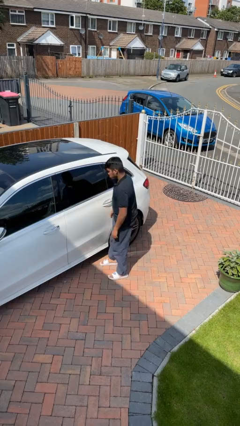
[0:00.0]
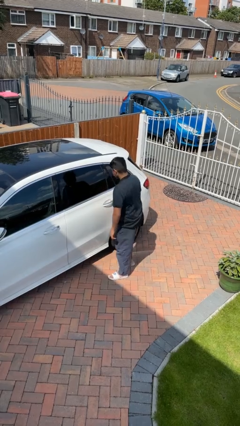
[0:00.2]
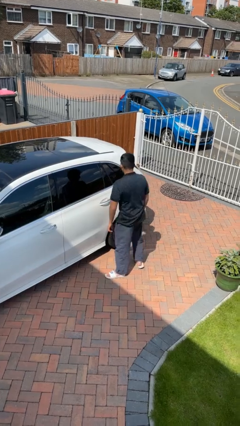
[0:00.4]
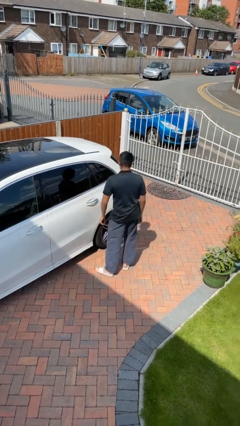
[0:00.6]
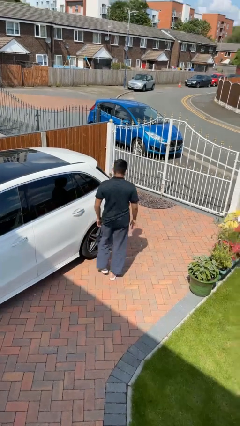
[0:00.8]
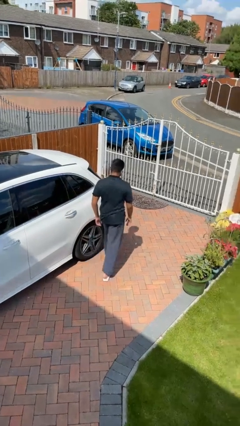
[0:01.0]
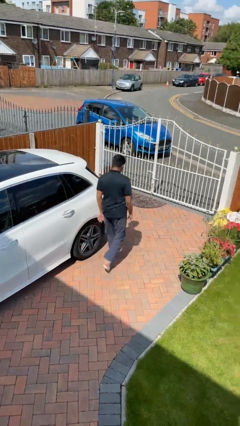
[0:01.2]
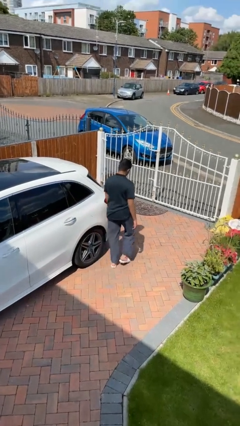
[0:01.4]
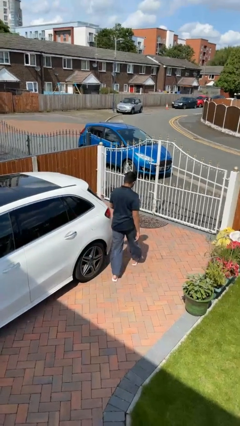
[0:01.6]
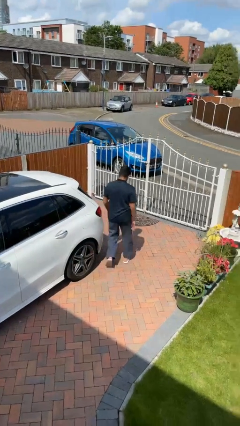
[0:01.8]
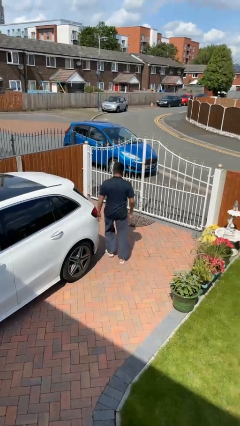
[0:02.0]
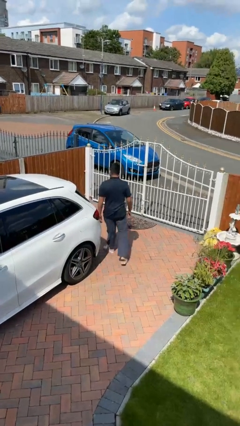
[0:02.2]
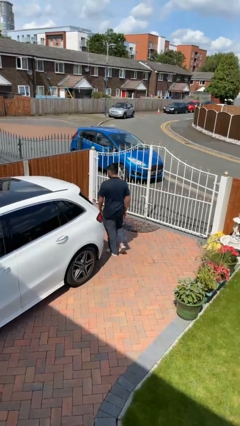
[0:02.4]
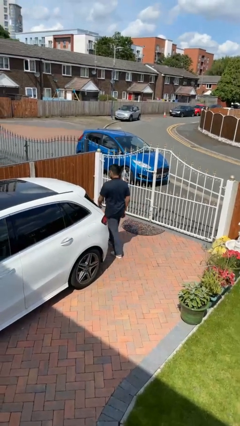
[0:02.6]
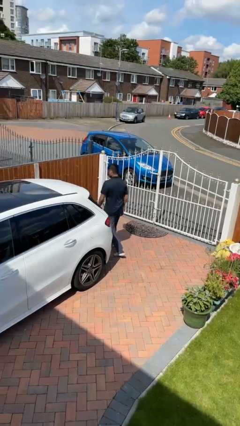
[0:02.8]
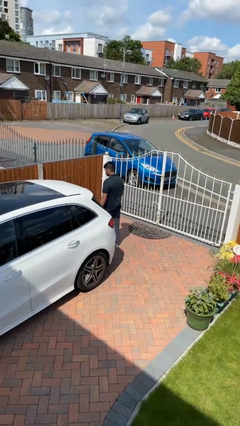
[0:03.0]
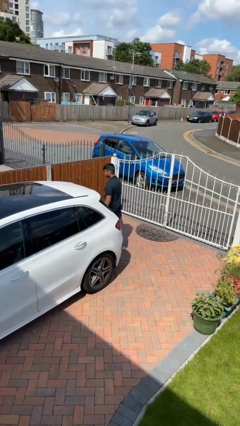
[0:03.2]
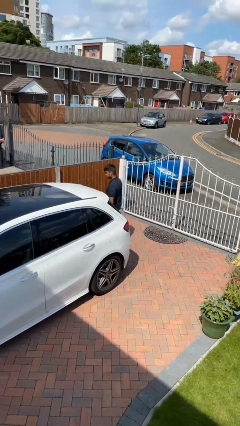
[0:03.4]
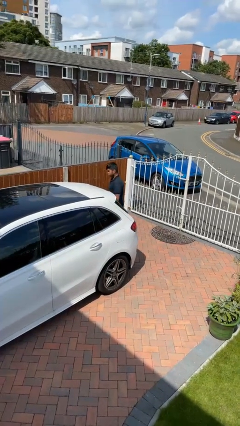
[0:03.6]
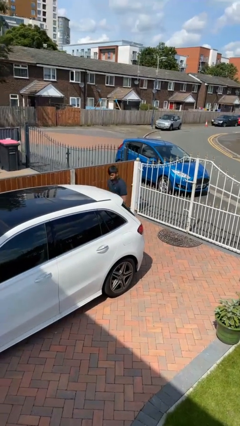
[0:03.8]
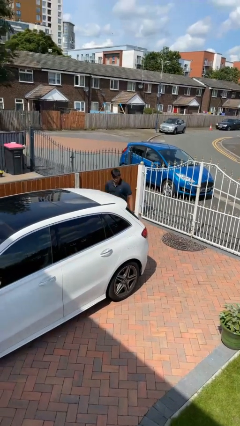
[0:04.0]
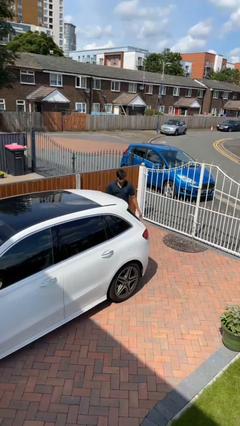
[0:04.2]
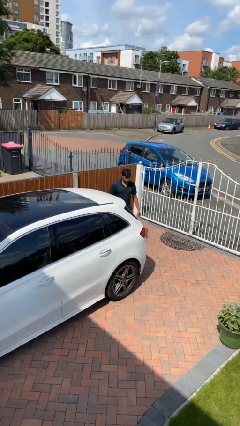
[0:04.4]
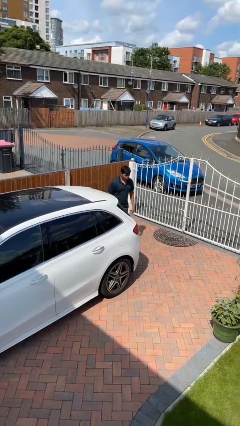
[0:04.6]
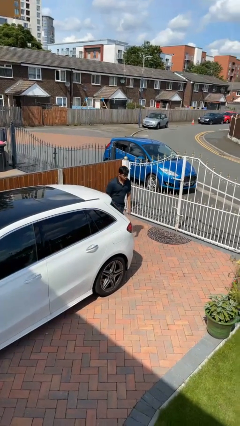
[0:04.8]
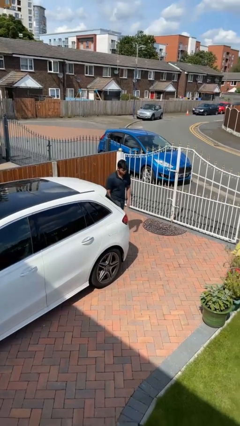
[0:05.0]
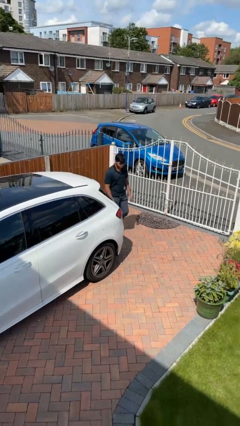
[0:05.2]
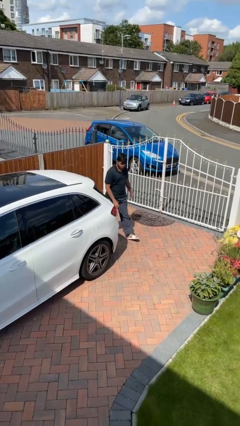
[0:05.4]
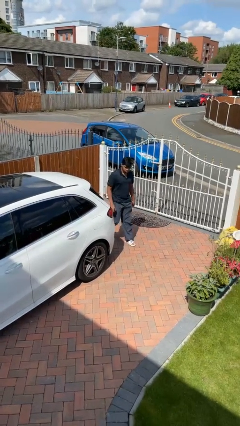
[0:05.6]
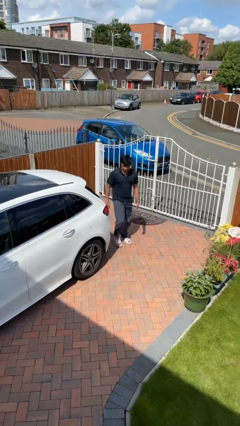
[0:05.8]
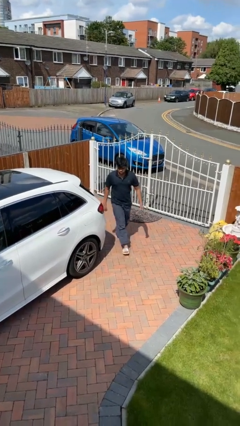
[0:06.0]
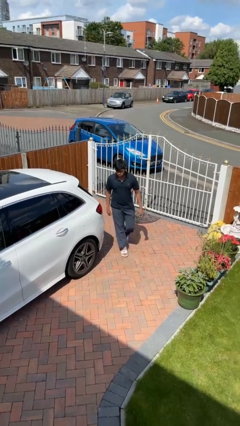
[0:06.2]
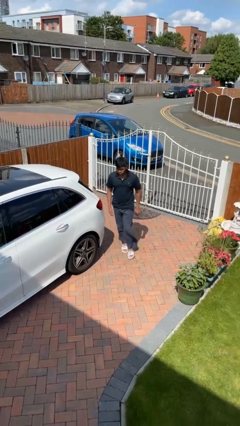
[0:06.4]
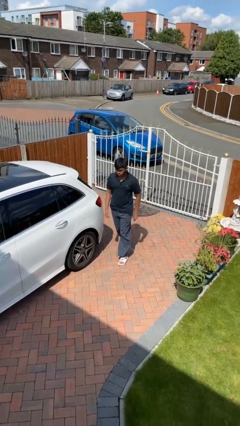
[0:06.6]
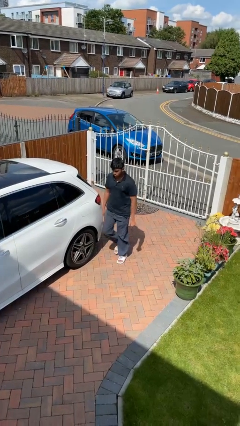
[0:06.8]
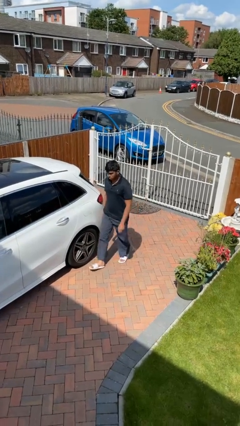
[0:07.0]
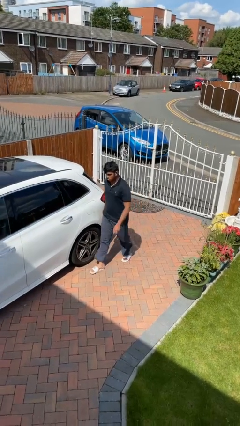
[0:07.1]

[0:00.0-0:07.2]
person walks around car

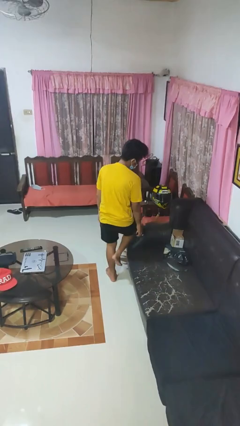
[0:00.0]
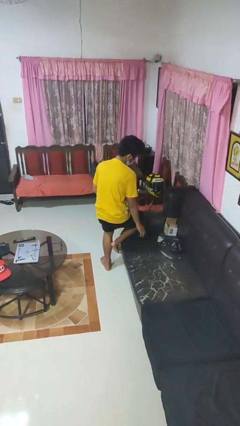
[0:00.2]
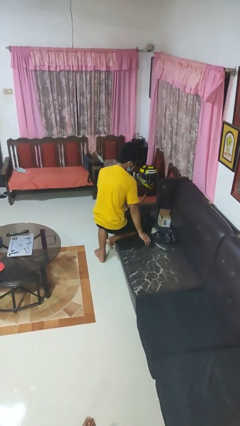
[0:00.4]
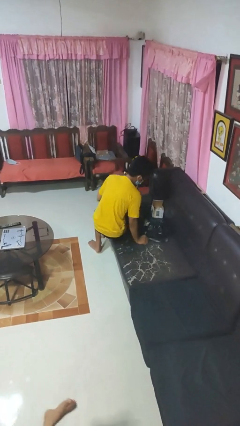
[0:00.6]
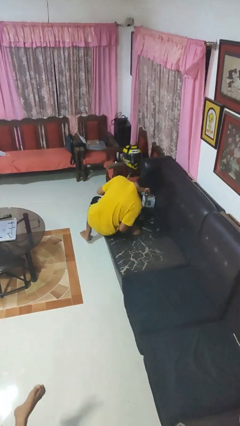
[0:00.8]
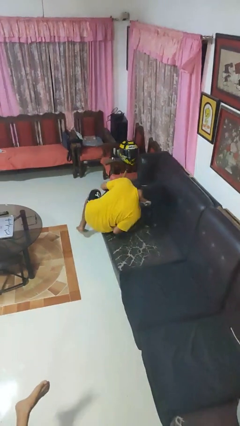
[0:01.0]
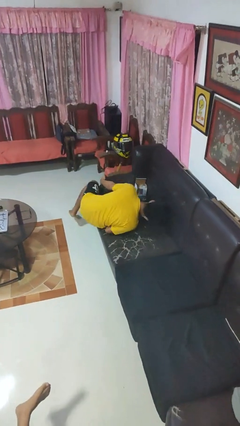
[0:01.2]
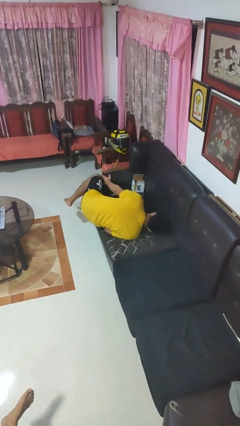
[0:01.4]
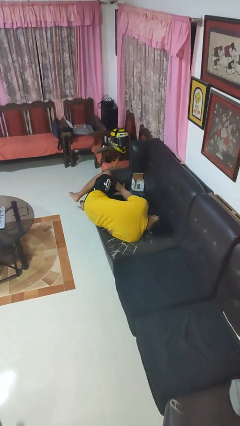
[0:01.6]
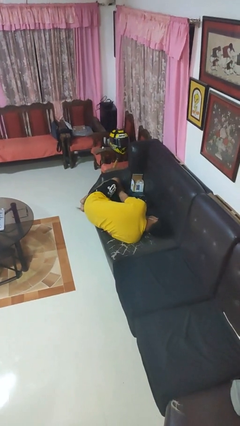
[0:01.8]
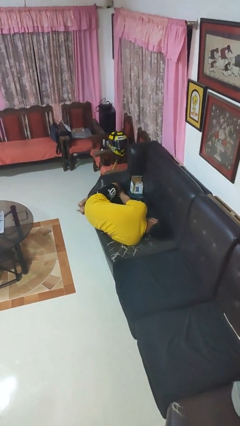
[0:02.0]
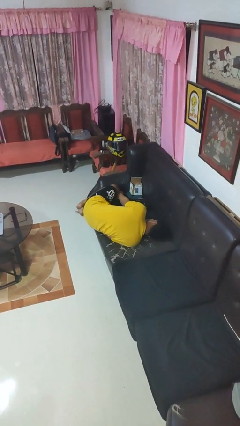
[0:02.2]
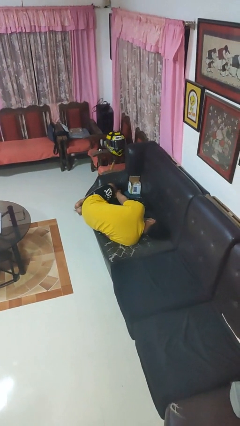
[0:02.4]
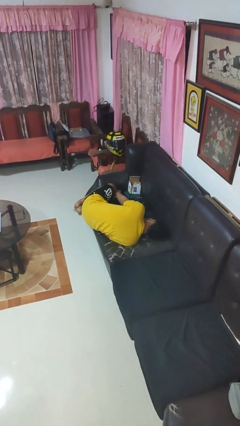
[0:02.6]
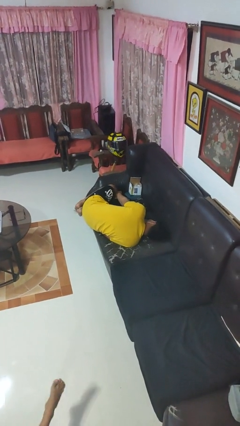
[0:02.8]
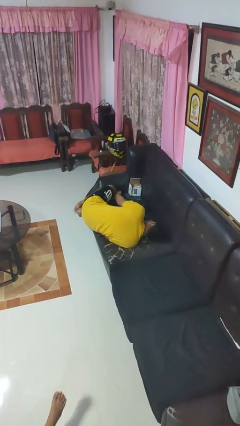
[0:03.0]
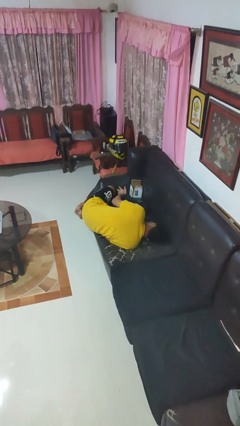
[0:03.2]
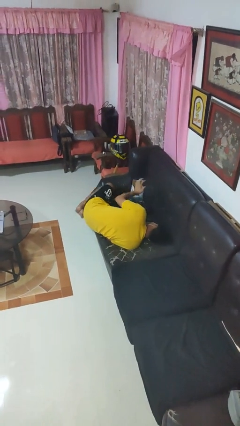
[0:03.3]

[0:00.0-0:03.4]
person lies down on couch

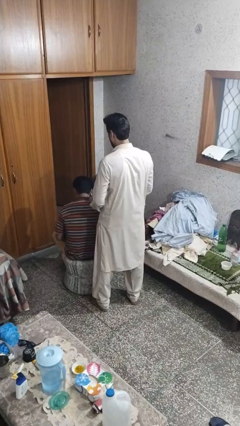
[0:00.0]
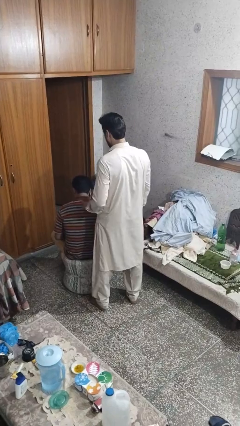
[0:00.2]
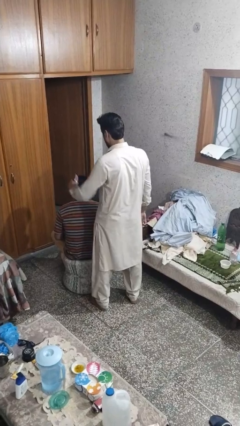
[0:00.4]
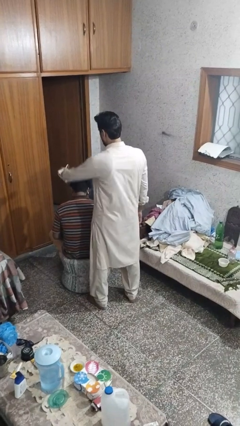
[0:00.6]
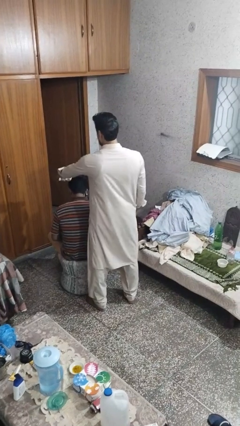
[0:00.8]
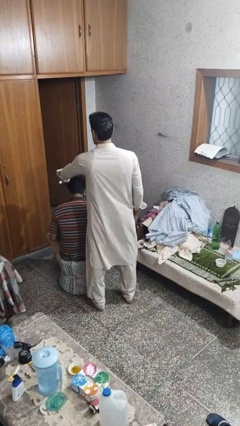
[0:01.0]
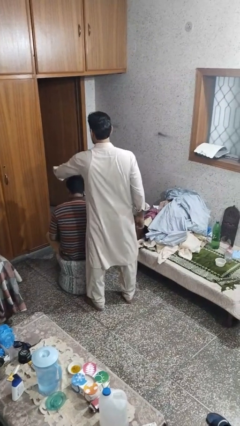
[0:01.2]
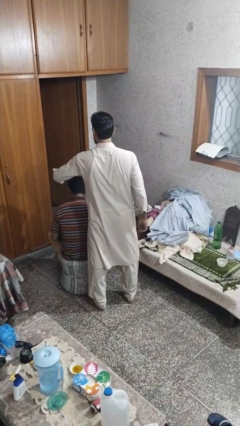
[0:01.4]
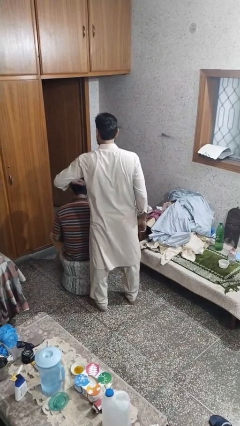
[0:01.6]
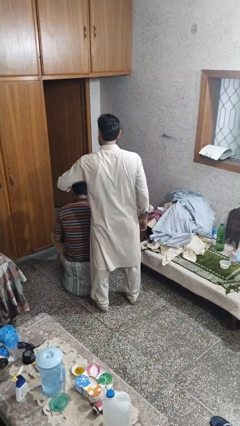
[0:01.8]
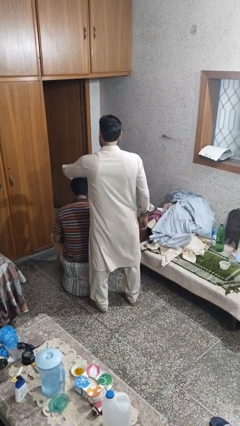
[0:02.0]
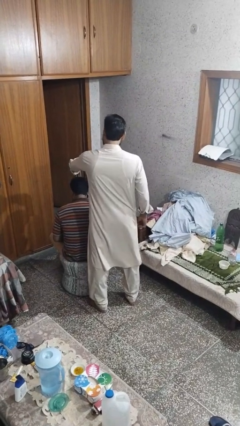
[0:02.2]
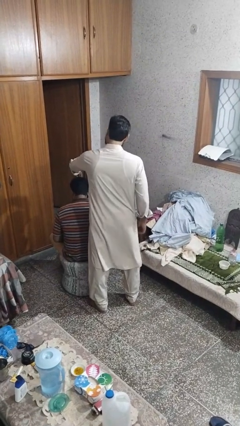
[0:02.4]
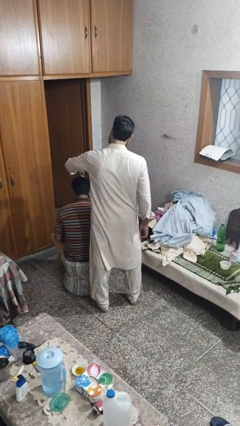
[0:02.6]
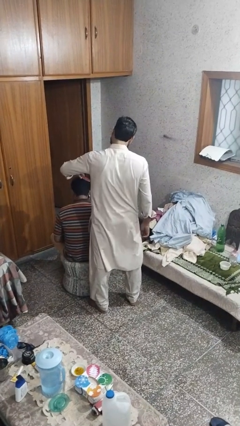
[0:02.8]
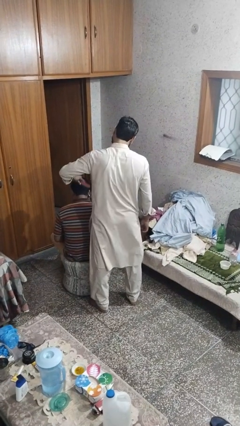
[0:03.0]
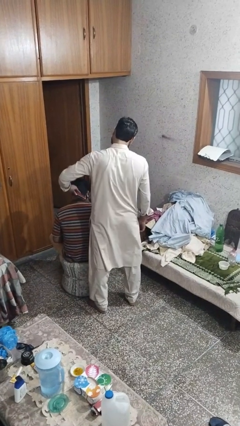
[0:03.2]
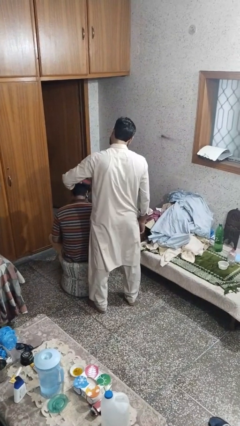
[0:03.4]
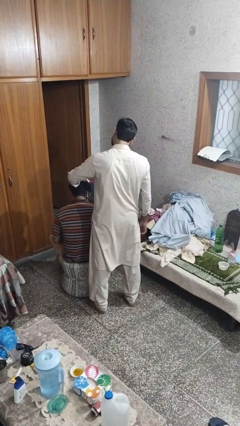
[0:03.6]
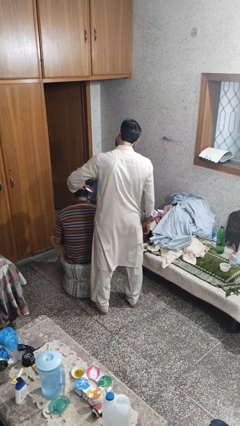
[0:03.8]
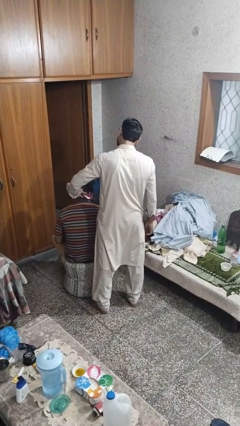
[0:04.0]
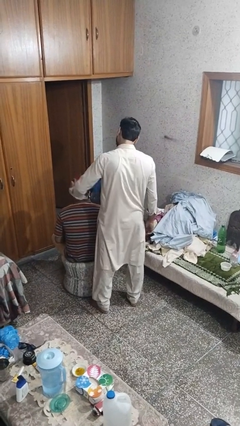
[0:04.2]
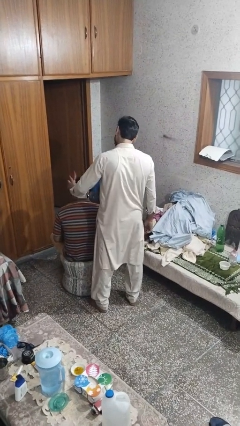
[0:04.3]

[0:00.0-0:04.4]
person brushes hair of person

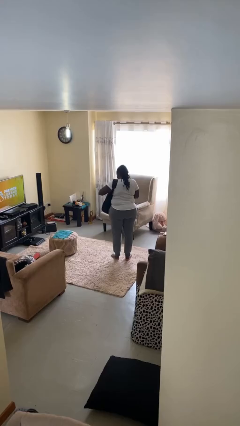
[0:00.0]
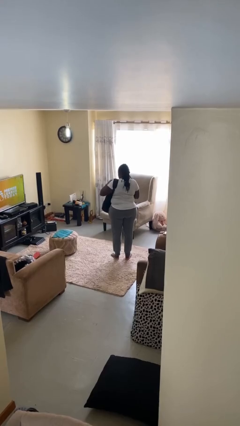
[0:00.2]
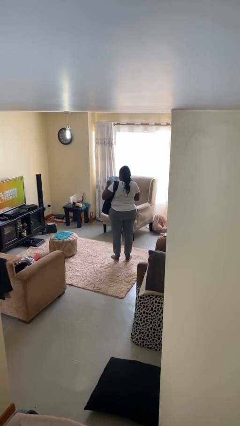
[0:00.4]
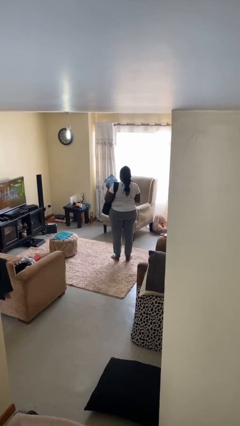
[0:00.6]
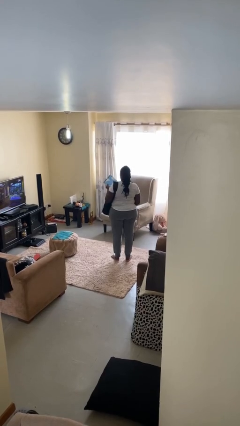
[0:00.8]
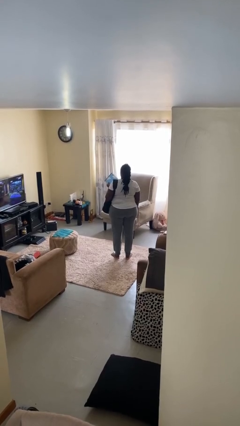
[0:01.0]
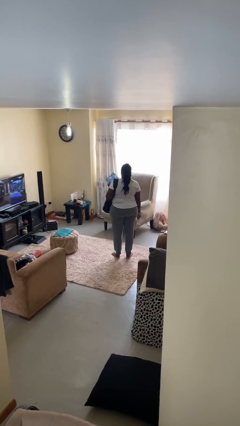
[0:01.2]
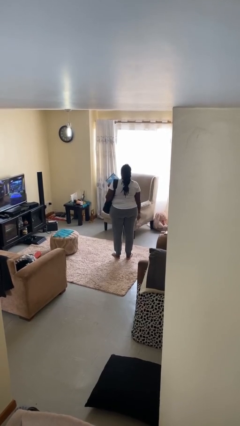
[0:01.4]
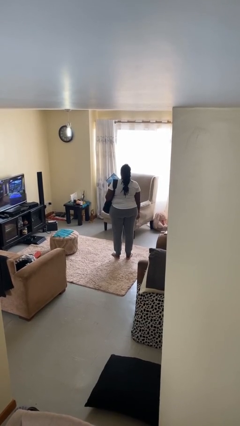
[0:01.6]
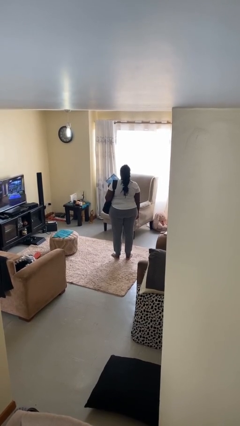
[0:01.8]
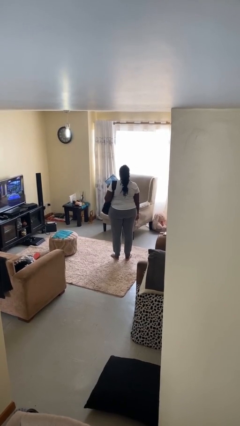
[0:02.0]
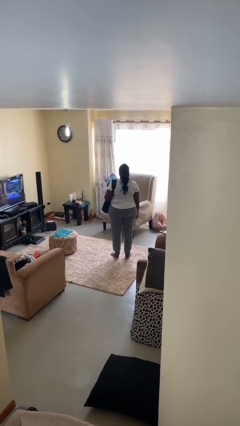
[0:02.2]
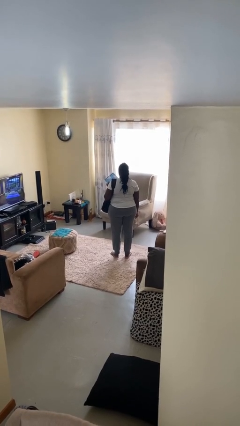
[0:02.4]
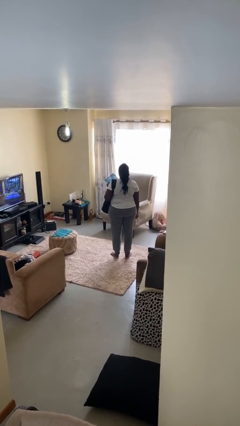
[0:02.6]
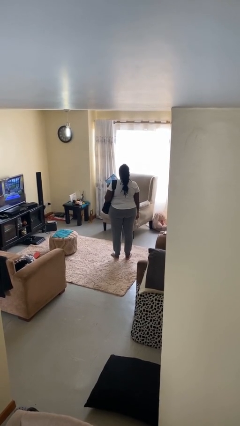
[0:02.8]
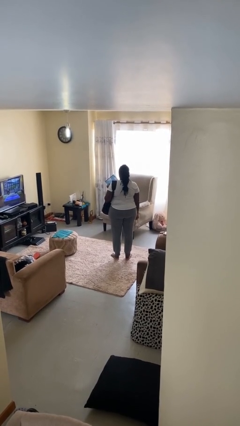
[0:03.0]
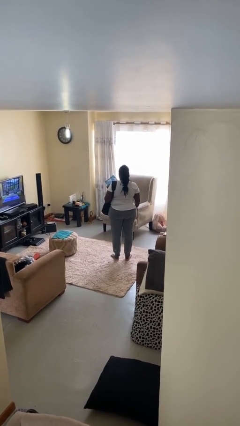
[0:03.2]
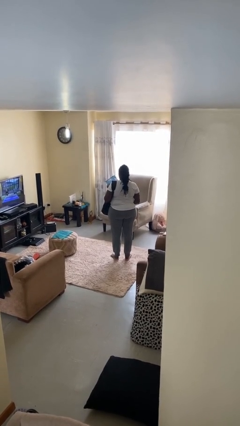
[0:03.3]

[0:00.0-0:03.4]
person takes object from backpack
